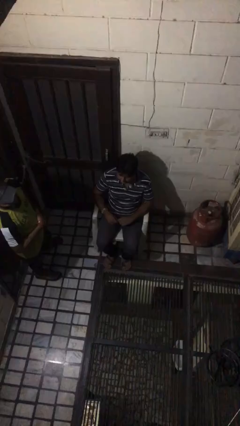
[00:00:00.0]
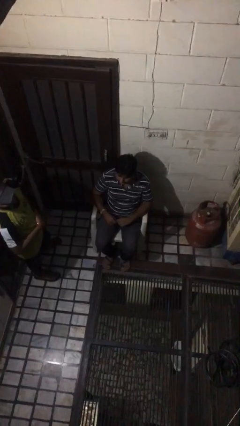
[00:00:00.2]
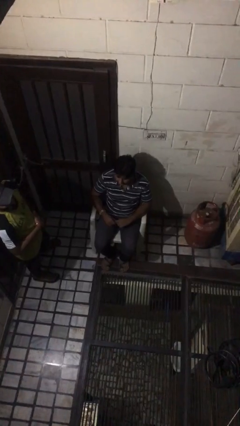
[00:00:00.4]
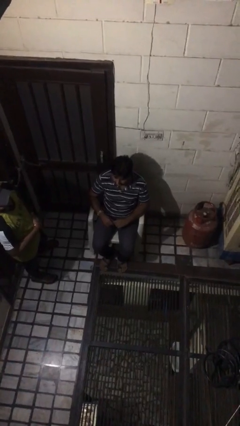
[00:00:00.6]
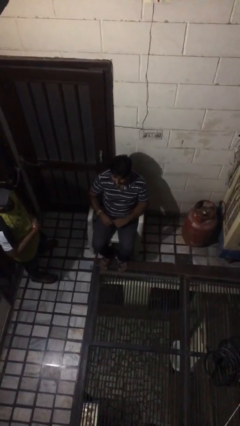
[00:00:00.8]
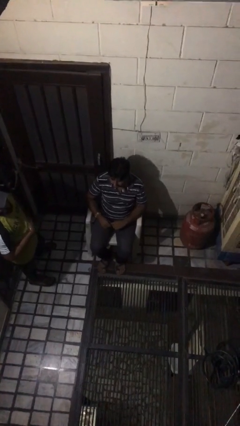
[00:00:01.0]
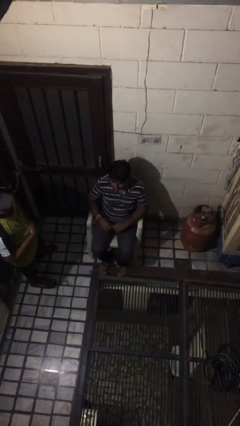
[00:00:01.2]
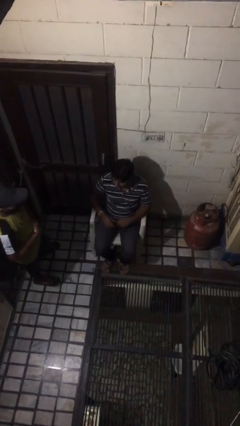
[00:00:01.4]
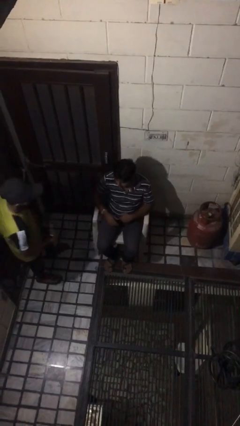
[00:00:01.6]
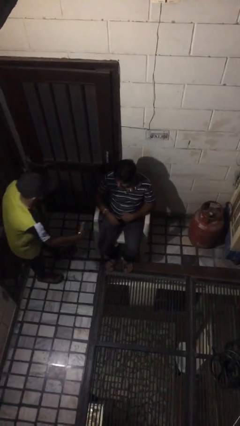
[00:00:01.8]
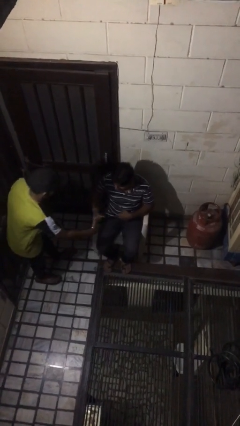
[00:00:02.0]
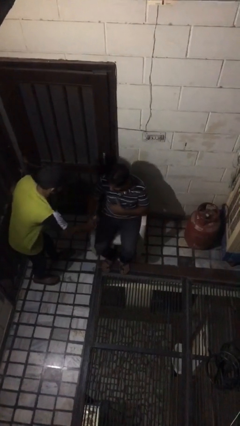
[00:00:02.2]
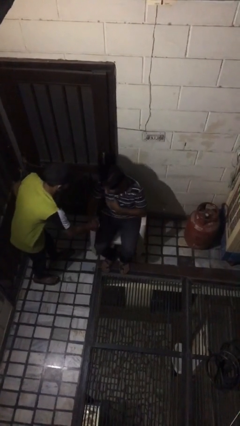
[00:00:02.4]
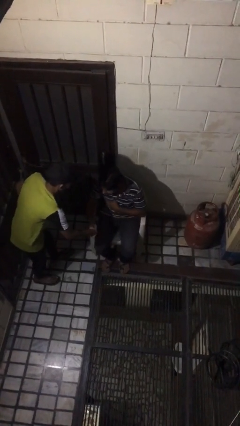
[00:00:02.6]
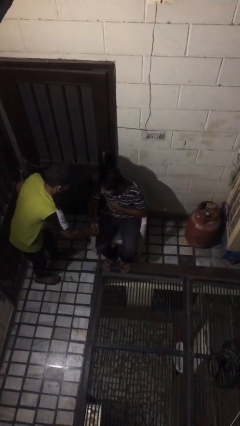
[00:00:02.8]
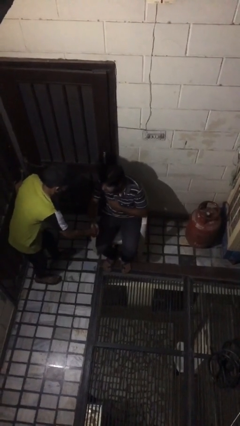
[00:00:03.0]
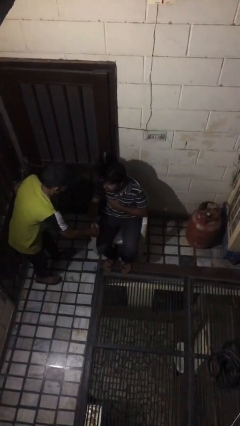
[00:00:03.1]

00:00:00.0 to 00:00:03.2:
person shakes hand

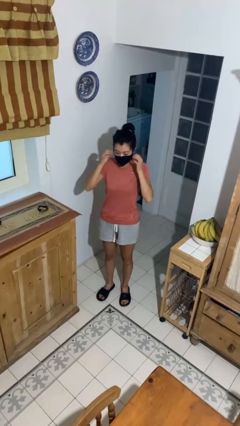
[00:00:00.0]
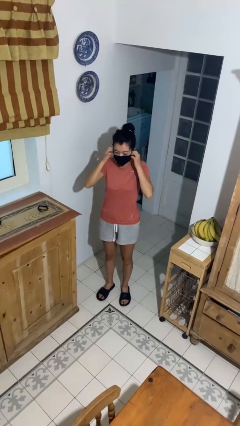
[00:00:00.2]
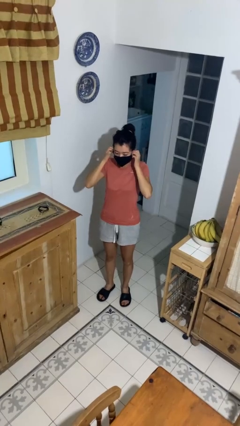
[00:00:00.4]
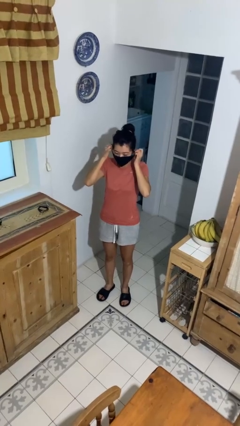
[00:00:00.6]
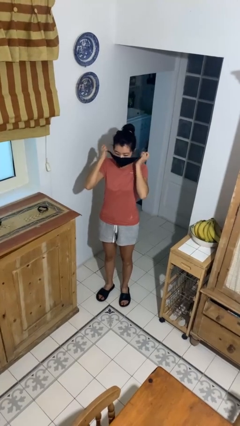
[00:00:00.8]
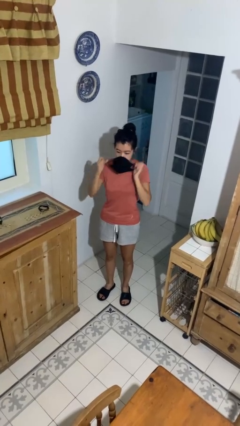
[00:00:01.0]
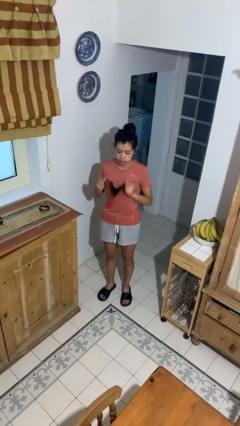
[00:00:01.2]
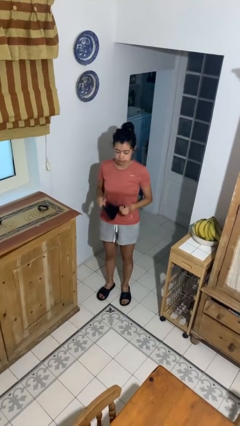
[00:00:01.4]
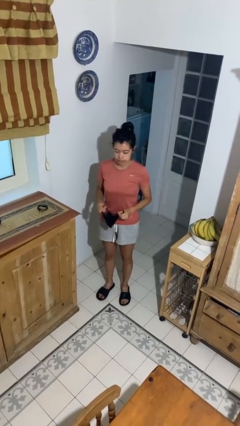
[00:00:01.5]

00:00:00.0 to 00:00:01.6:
person takes off facemask

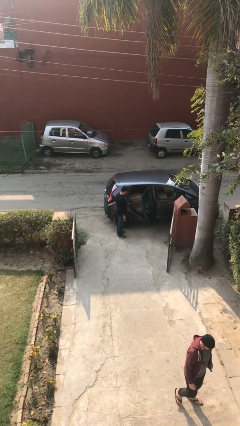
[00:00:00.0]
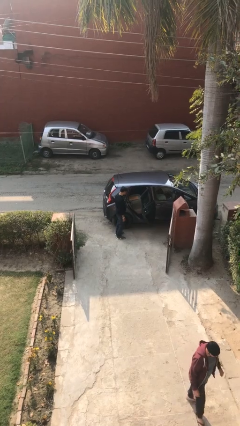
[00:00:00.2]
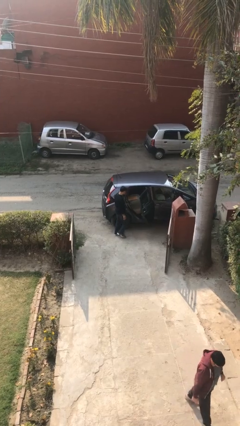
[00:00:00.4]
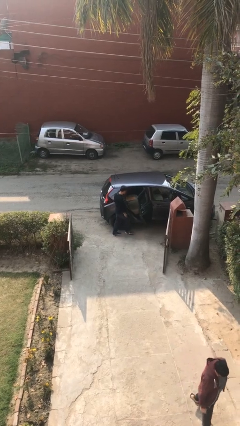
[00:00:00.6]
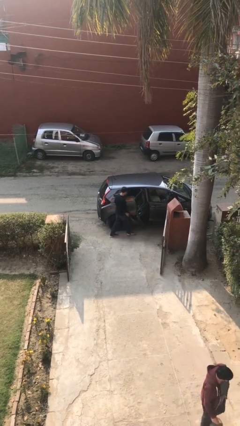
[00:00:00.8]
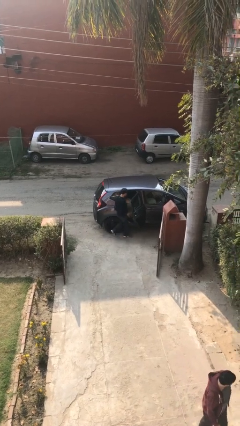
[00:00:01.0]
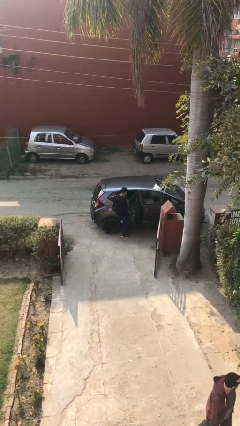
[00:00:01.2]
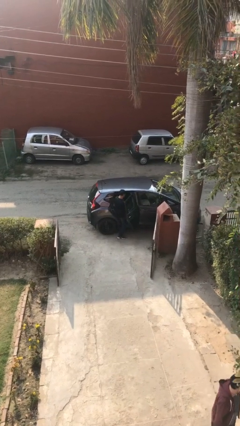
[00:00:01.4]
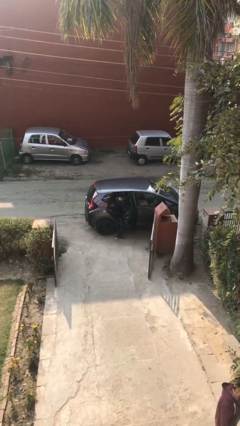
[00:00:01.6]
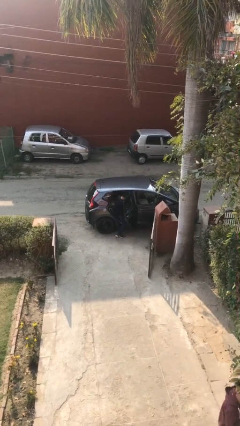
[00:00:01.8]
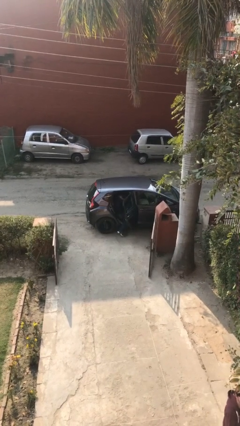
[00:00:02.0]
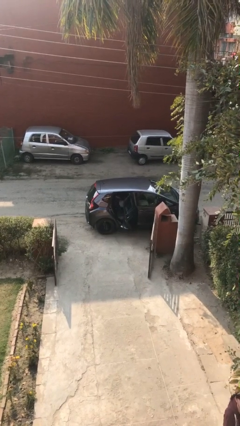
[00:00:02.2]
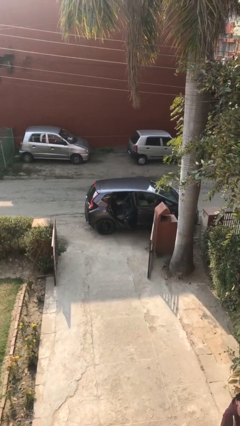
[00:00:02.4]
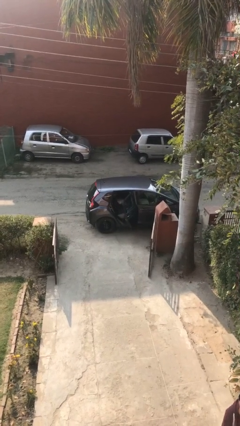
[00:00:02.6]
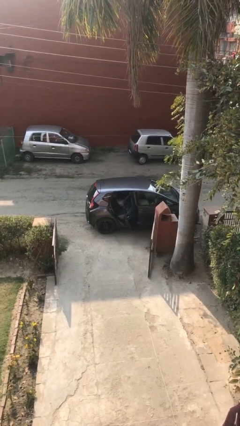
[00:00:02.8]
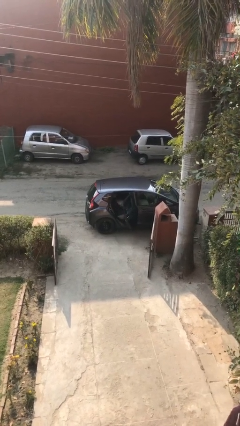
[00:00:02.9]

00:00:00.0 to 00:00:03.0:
person enters car

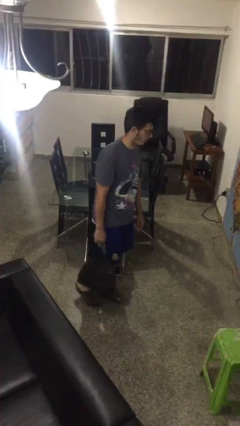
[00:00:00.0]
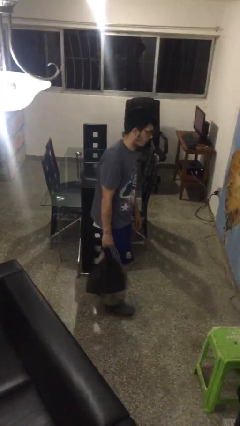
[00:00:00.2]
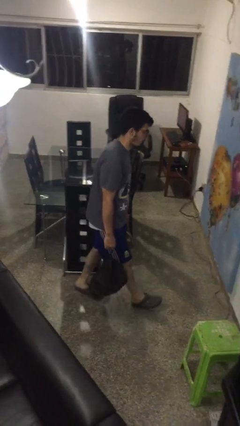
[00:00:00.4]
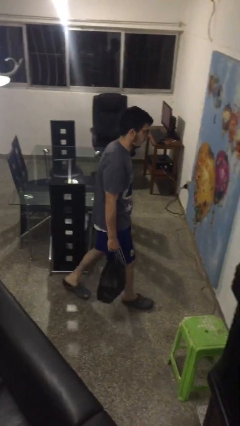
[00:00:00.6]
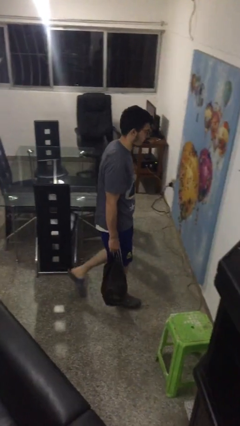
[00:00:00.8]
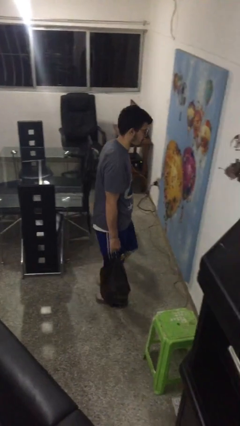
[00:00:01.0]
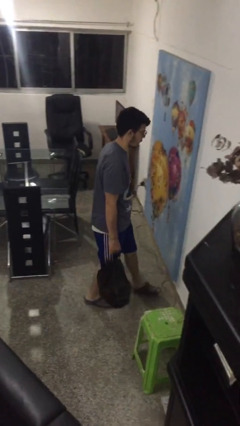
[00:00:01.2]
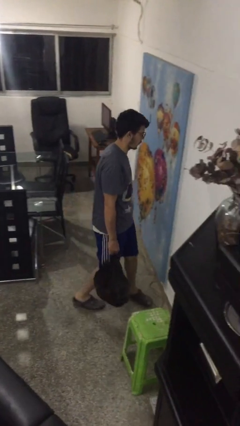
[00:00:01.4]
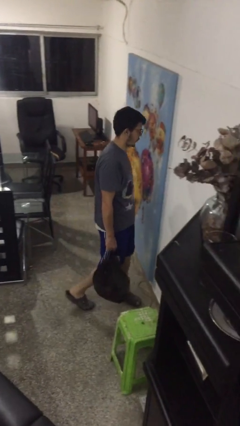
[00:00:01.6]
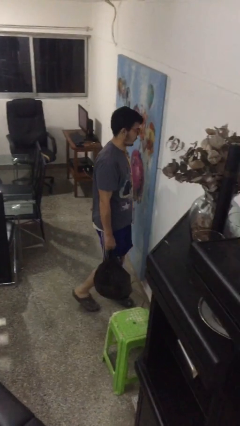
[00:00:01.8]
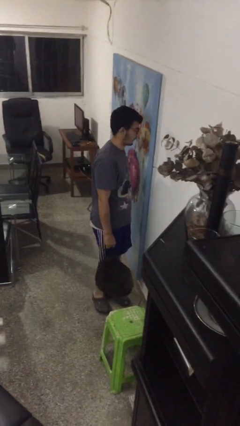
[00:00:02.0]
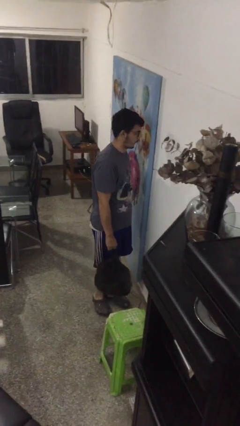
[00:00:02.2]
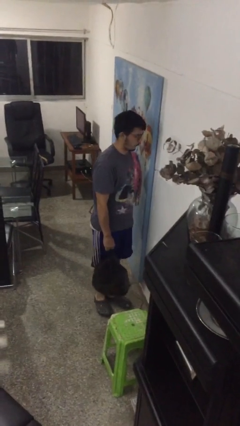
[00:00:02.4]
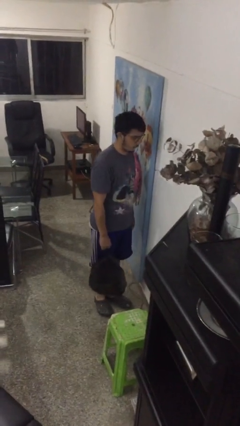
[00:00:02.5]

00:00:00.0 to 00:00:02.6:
person carries groceries

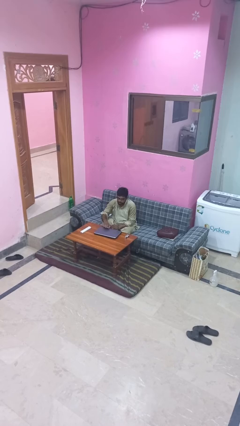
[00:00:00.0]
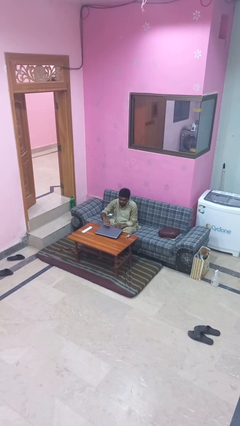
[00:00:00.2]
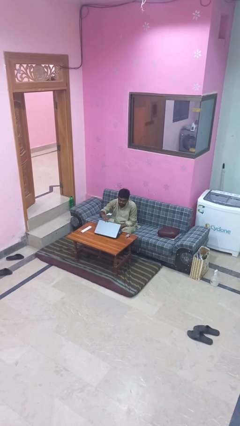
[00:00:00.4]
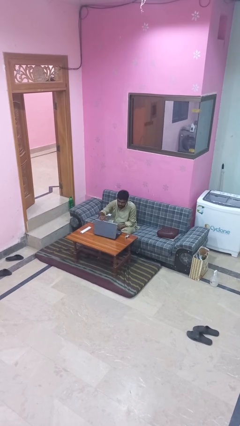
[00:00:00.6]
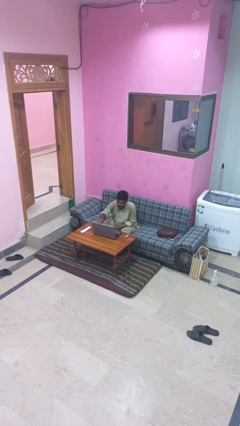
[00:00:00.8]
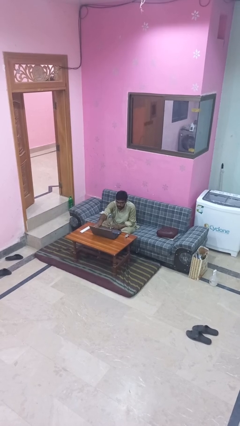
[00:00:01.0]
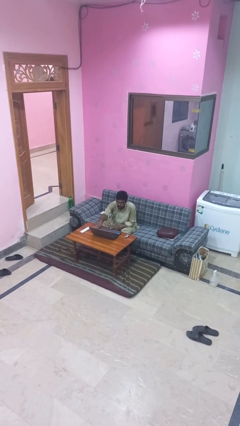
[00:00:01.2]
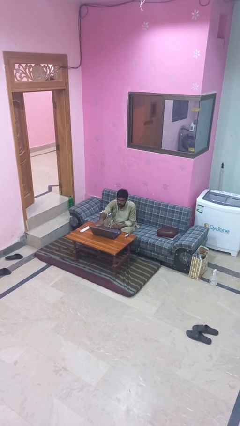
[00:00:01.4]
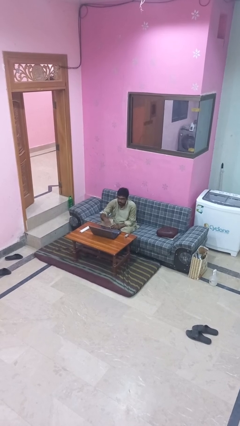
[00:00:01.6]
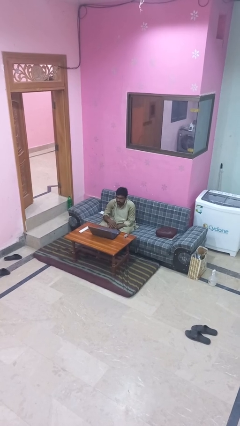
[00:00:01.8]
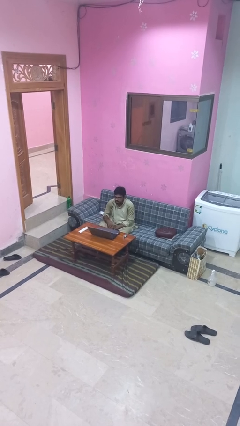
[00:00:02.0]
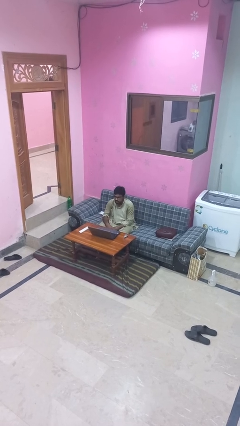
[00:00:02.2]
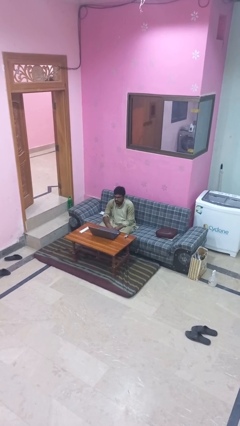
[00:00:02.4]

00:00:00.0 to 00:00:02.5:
person opens laptop

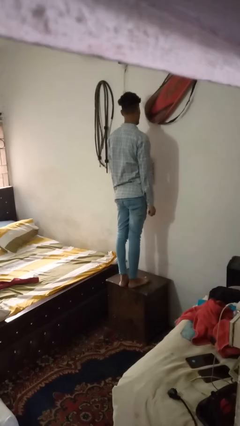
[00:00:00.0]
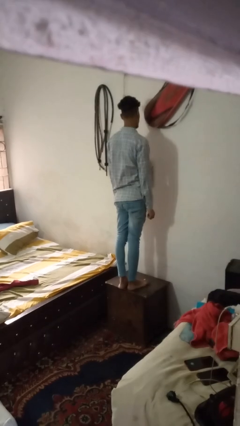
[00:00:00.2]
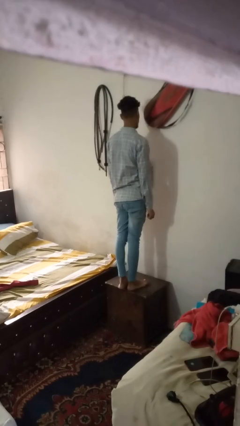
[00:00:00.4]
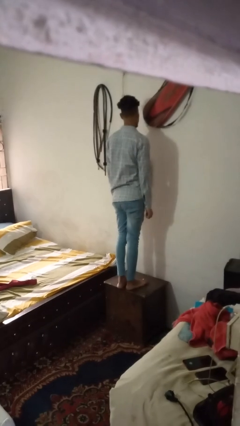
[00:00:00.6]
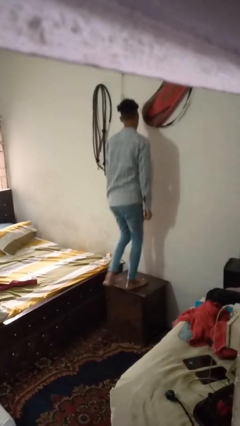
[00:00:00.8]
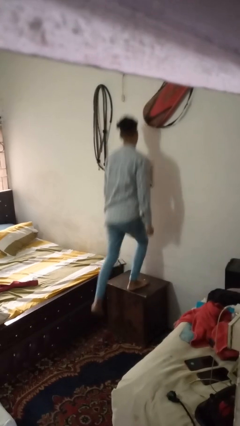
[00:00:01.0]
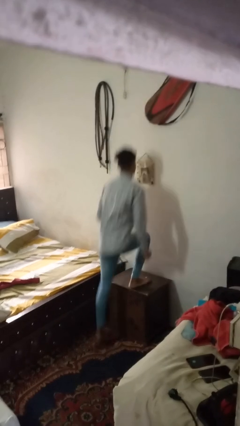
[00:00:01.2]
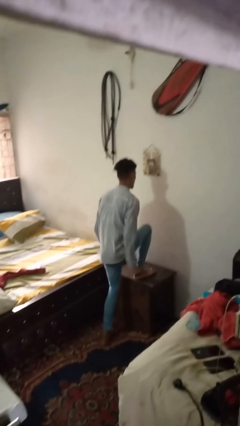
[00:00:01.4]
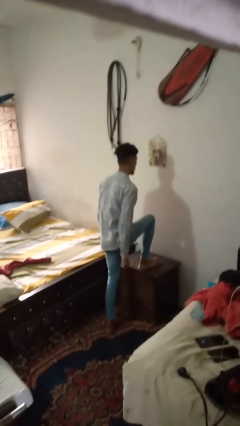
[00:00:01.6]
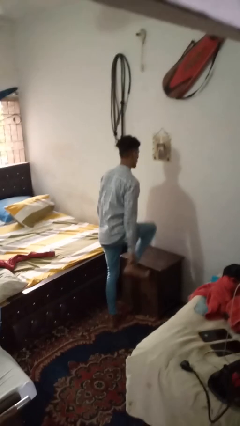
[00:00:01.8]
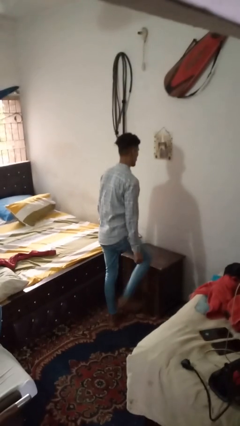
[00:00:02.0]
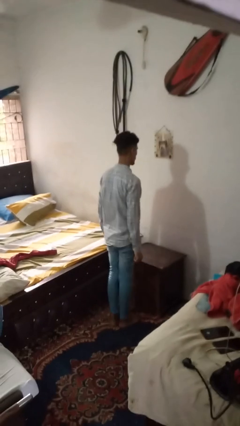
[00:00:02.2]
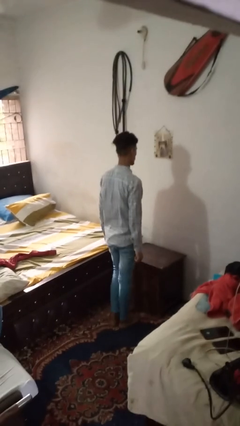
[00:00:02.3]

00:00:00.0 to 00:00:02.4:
person climbs off table

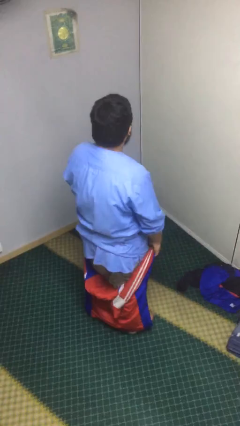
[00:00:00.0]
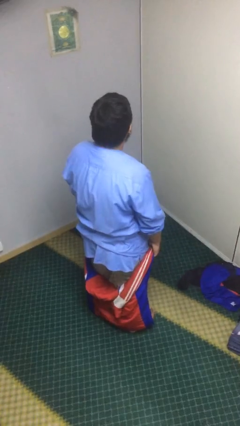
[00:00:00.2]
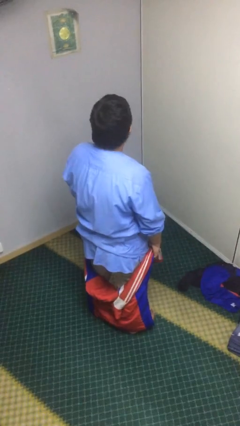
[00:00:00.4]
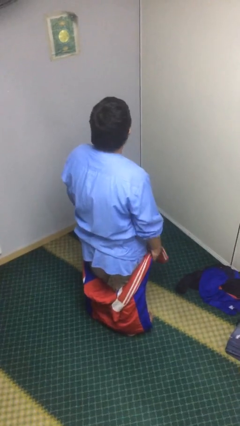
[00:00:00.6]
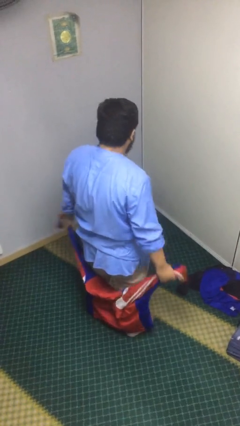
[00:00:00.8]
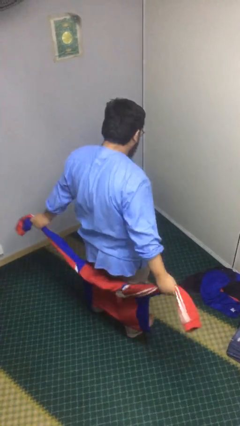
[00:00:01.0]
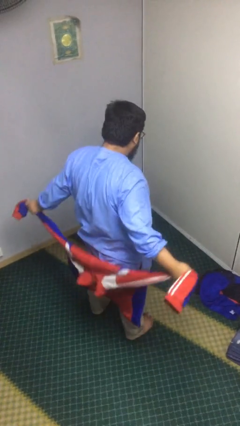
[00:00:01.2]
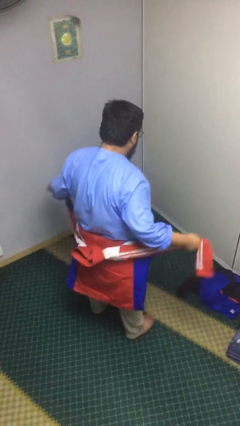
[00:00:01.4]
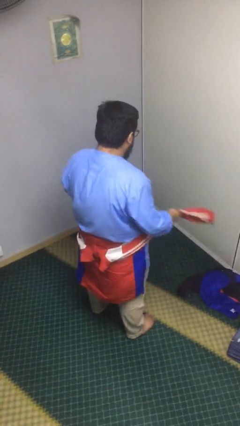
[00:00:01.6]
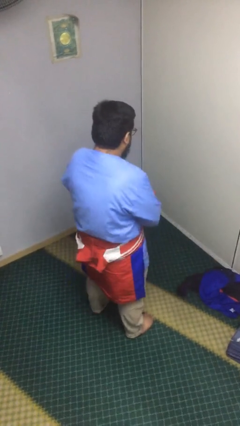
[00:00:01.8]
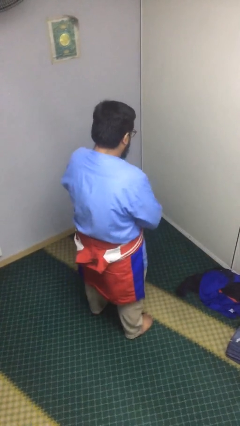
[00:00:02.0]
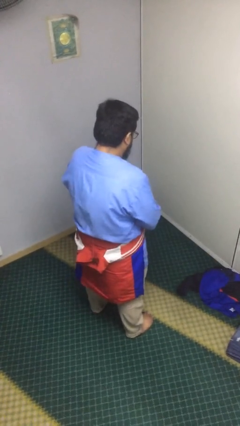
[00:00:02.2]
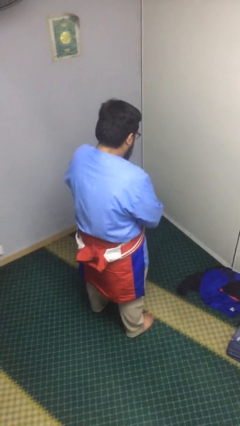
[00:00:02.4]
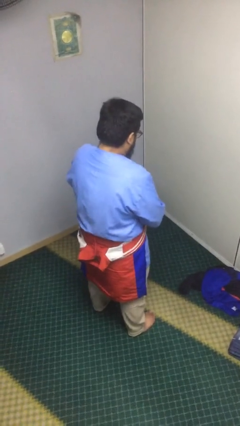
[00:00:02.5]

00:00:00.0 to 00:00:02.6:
person ties jacket around waist
